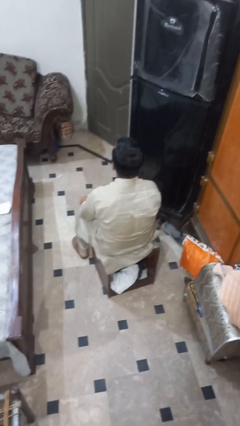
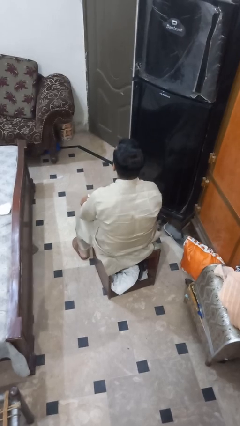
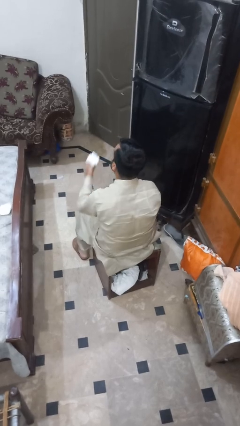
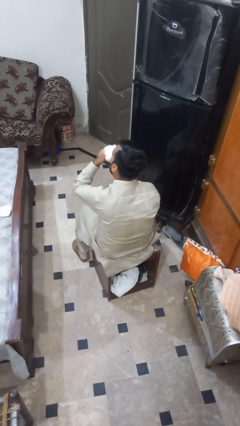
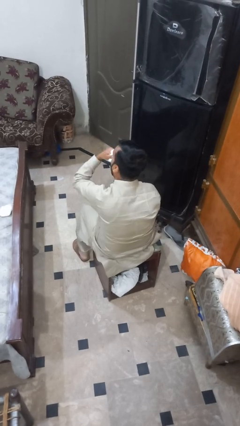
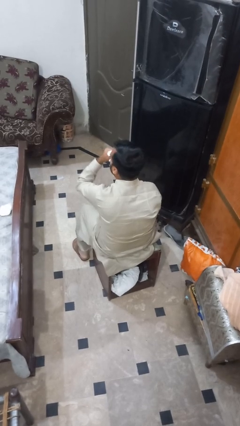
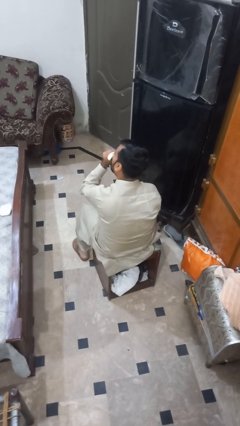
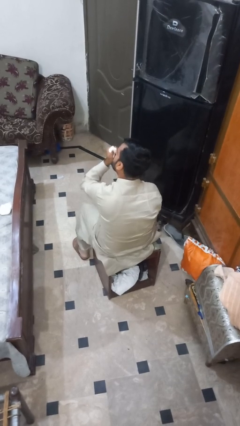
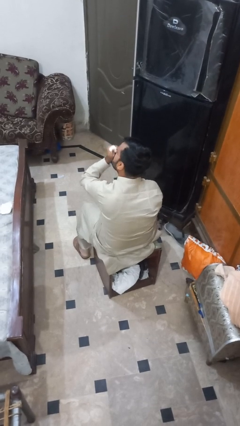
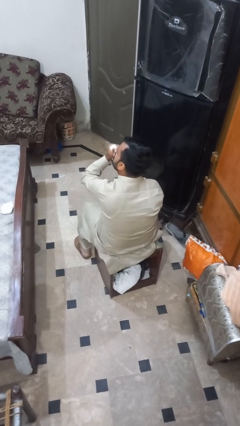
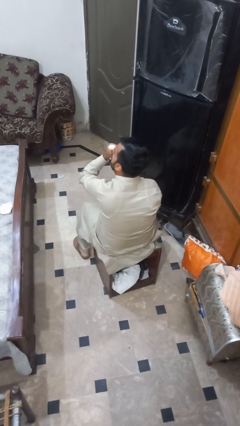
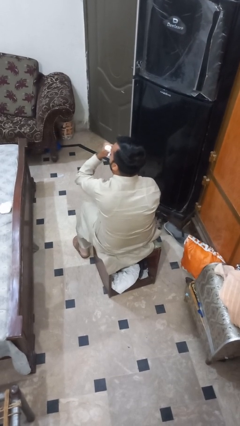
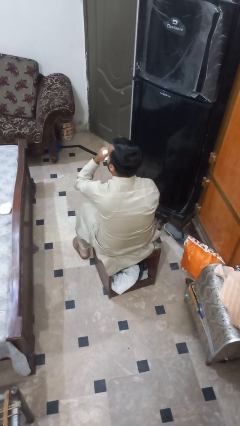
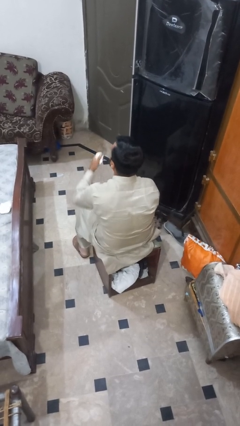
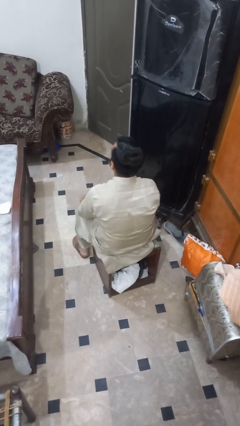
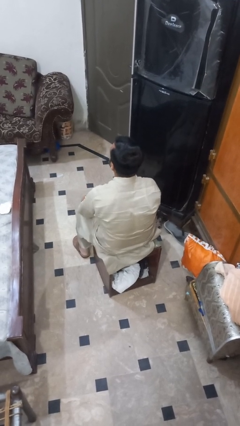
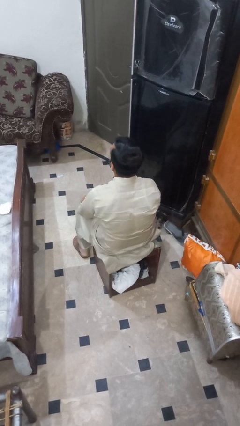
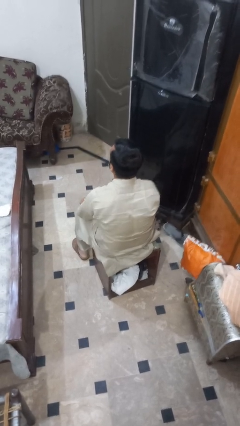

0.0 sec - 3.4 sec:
person blows nose

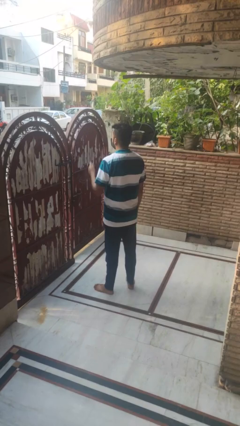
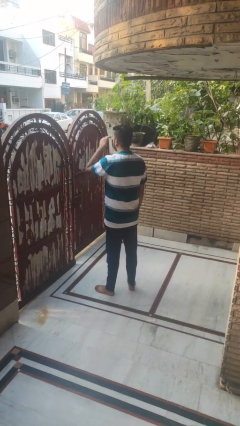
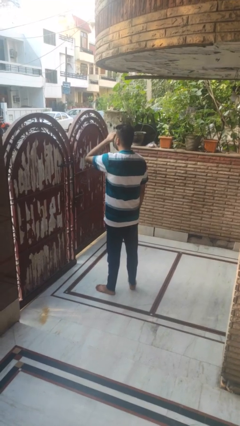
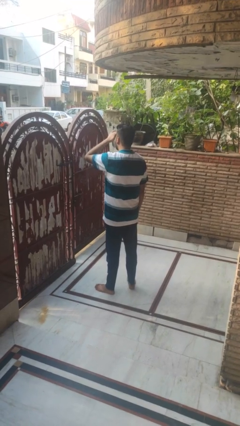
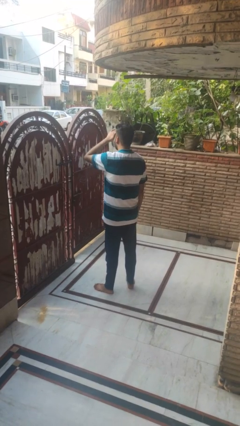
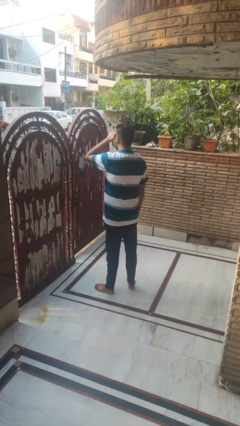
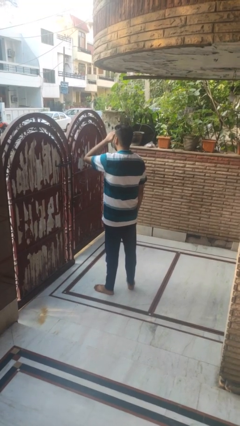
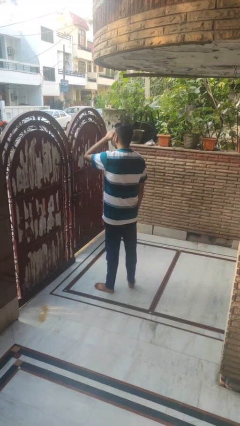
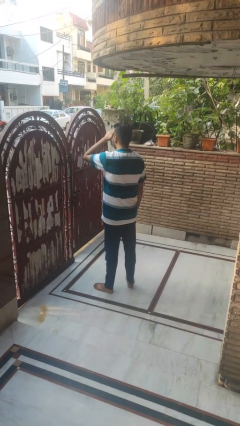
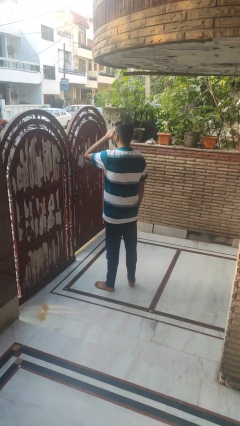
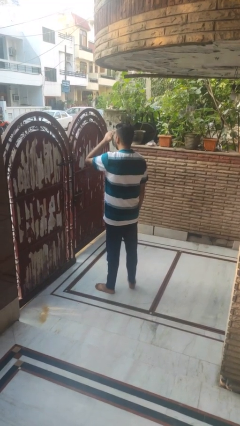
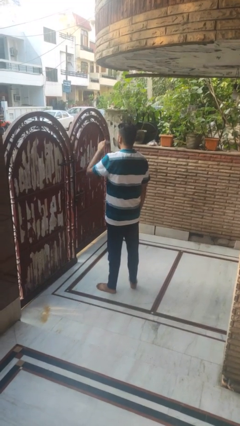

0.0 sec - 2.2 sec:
person shades eyes

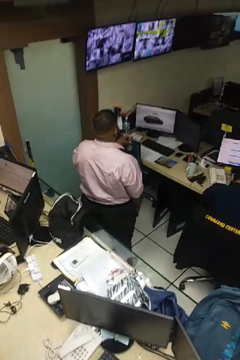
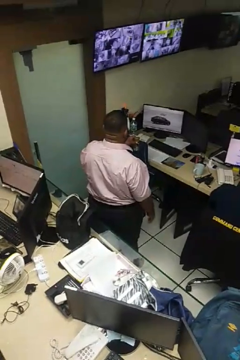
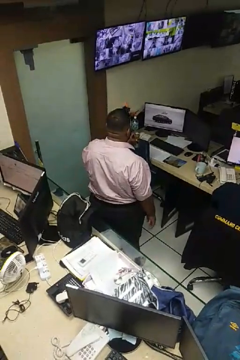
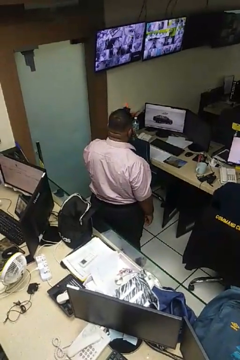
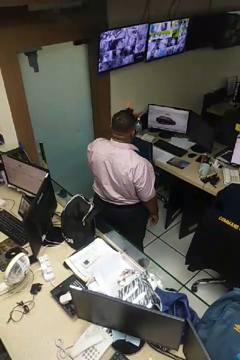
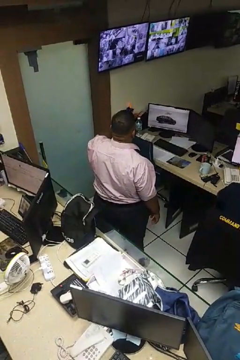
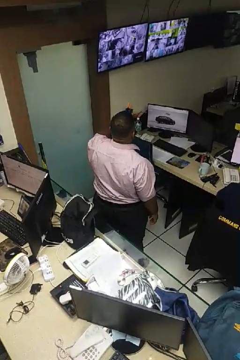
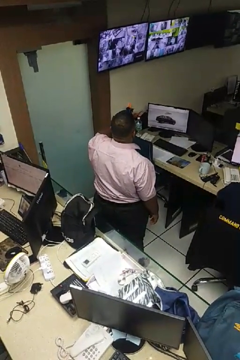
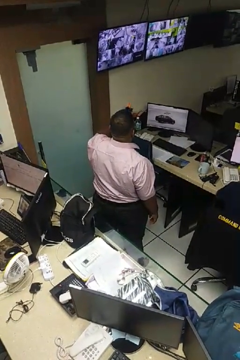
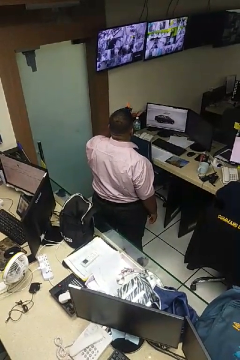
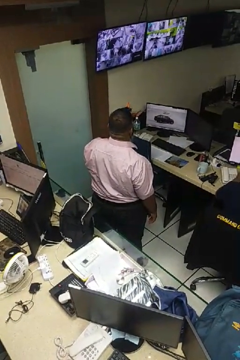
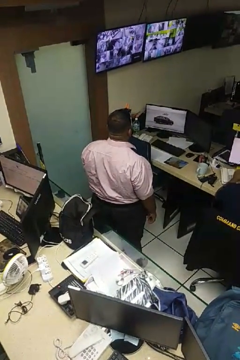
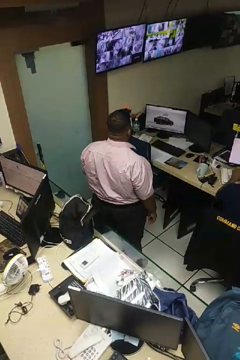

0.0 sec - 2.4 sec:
person drinks from beverage can

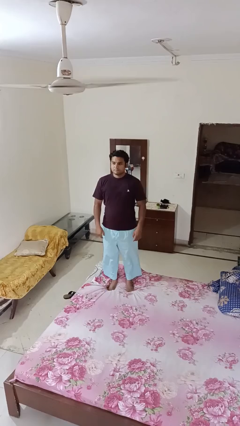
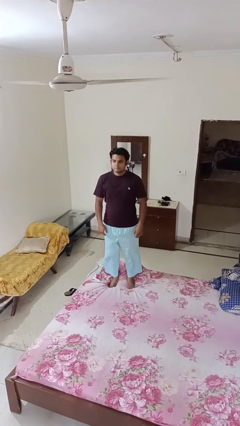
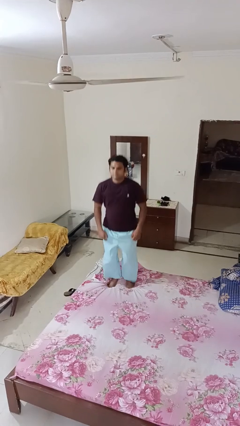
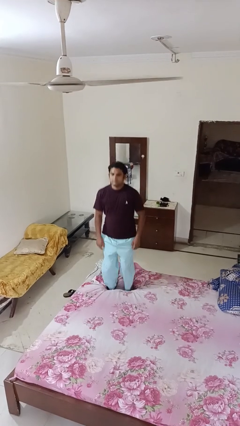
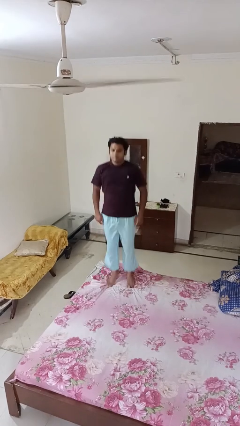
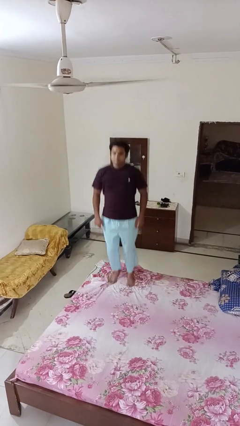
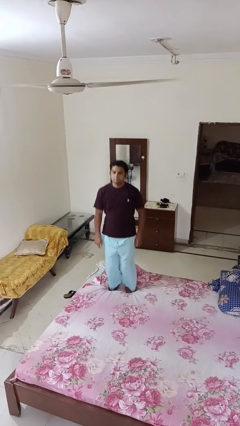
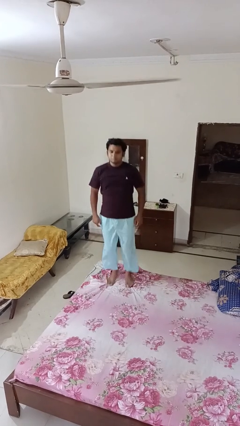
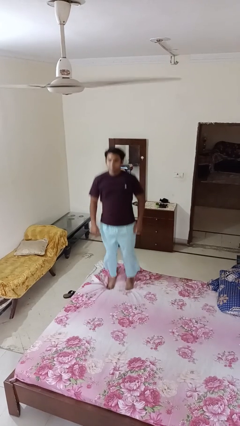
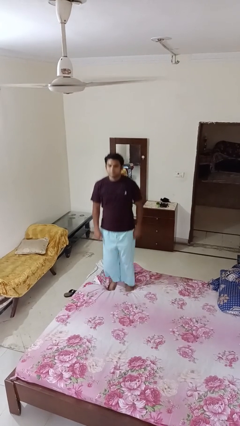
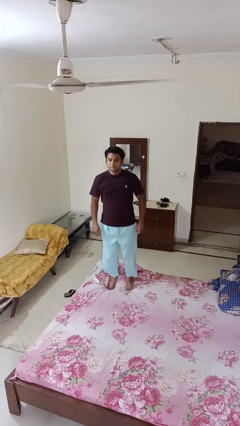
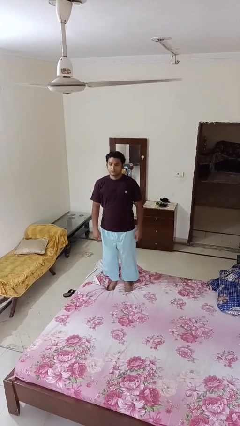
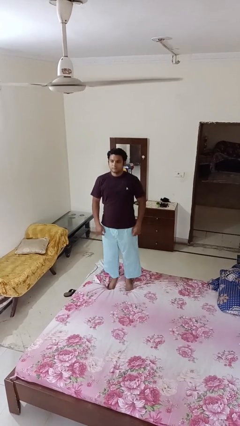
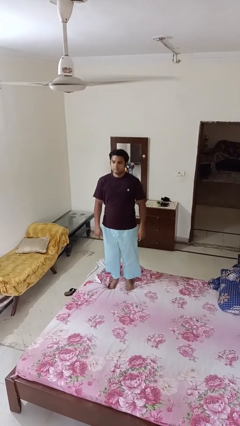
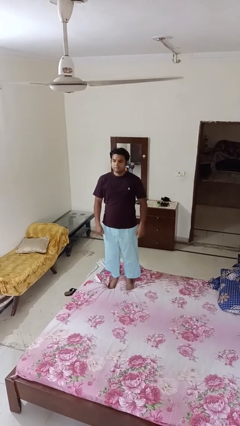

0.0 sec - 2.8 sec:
person jumps on bed

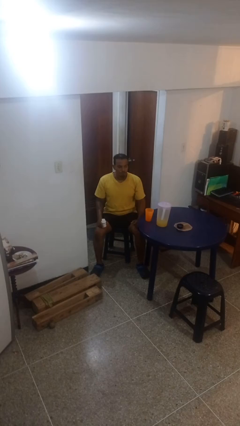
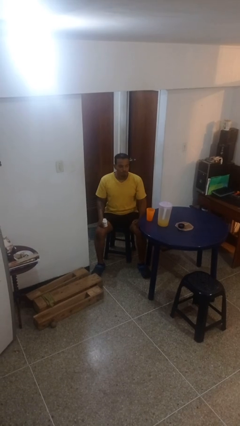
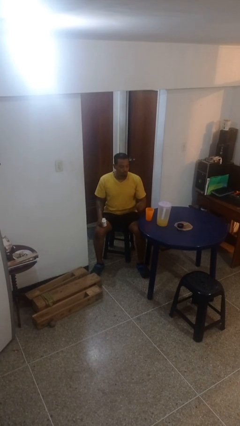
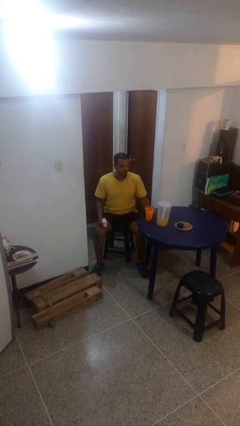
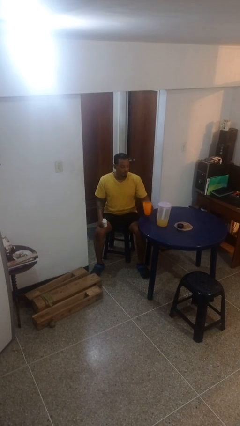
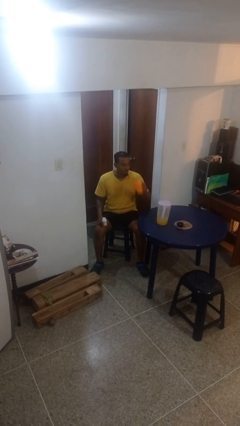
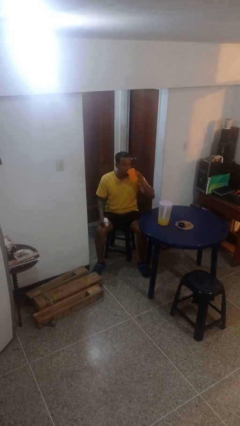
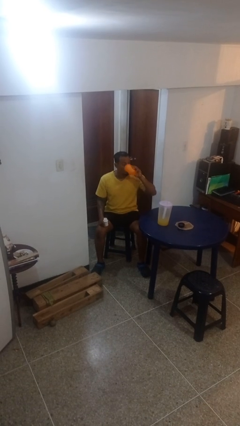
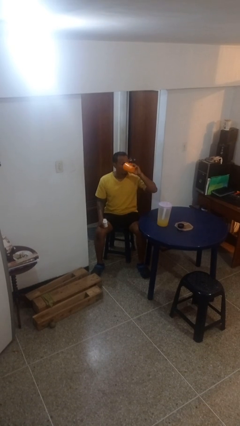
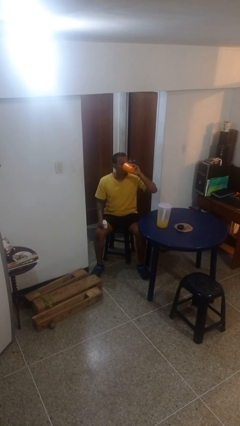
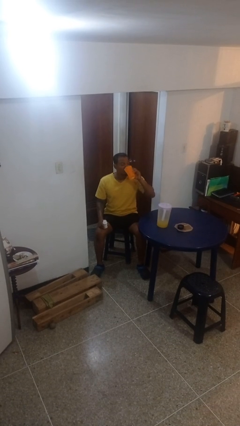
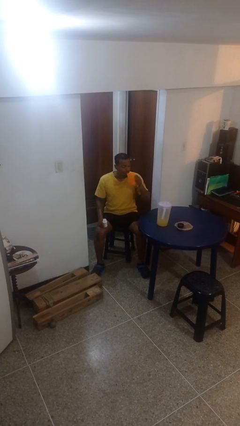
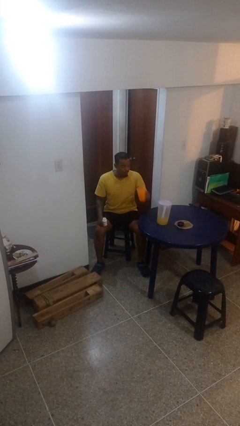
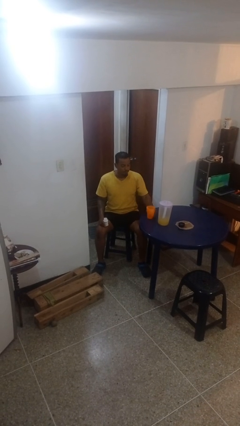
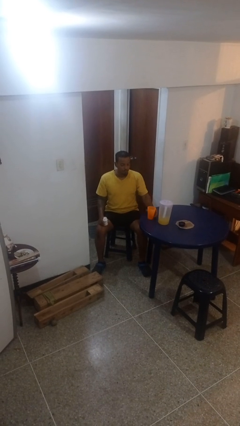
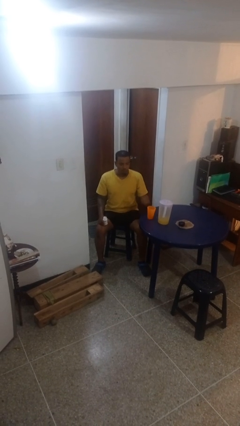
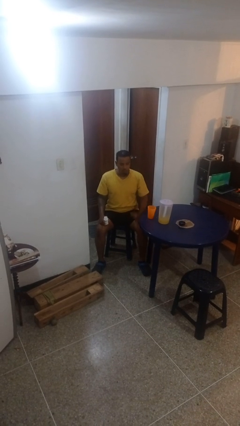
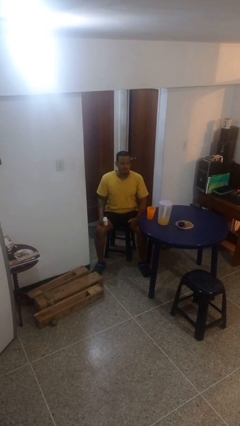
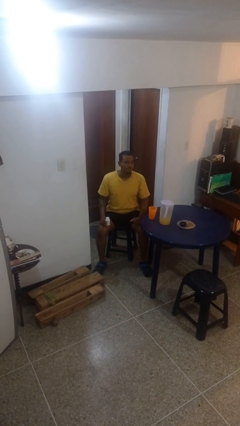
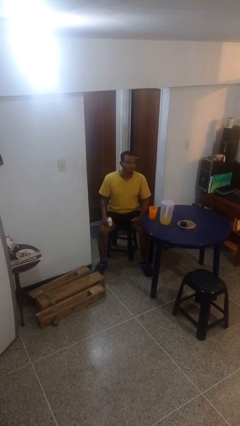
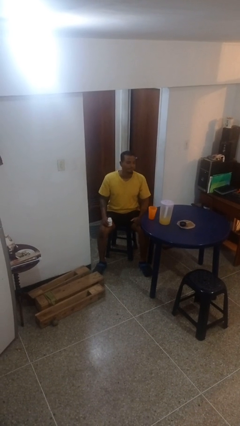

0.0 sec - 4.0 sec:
person drinks from cup

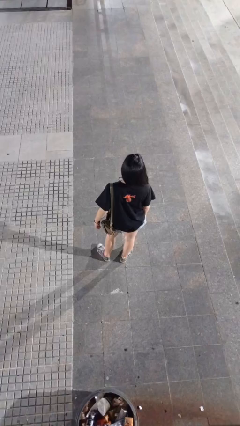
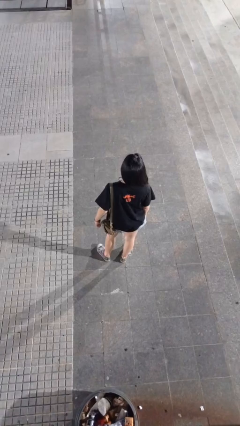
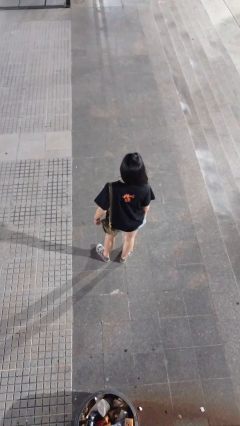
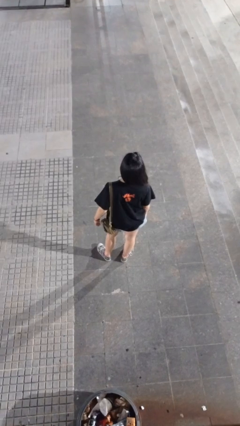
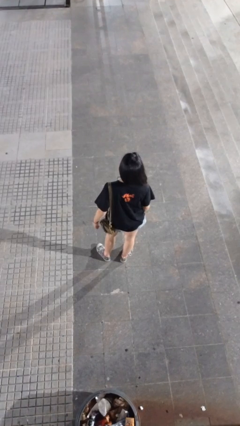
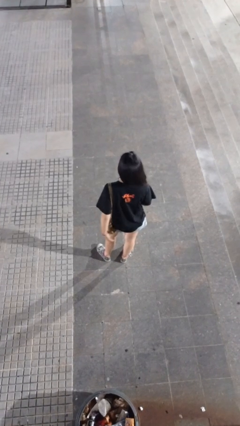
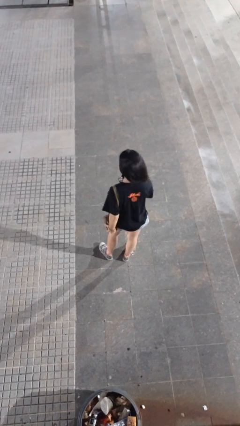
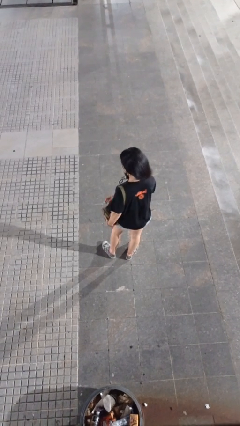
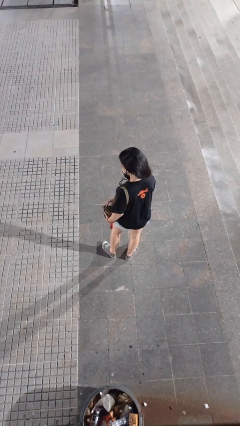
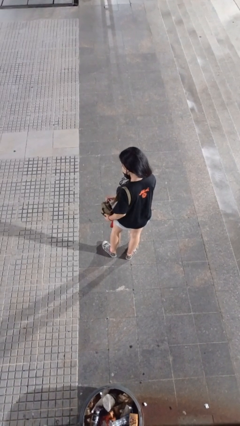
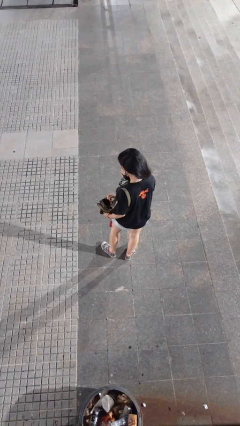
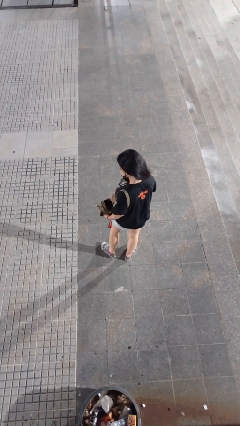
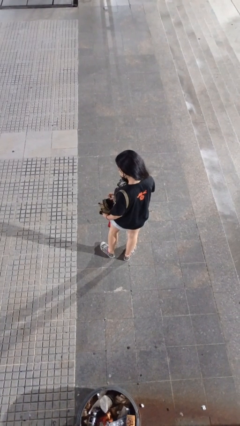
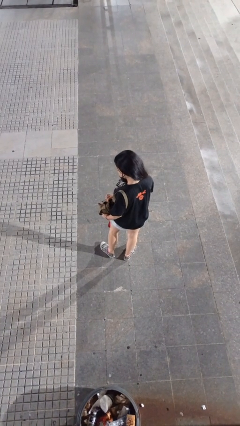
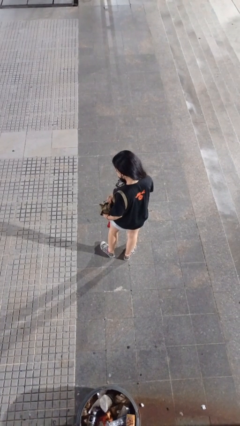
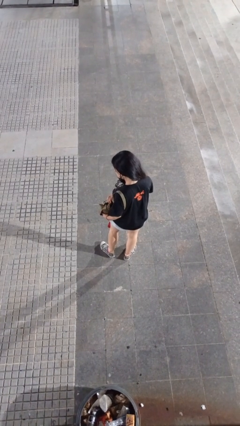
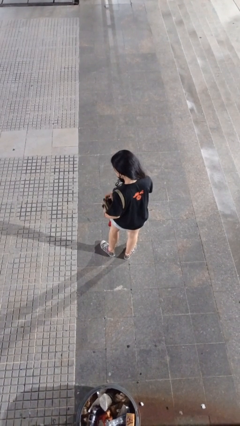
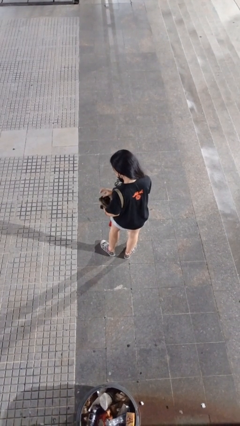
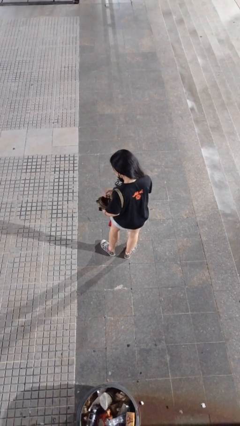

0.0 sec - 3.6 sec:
person searches in purse
